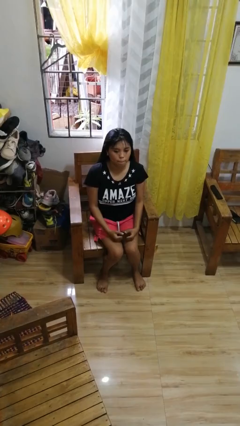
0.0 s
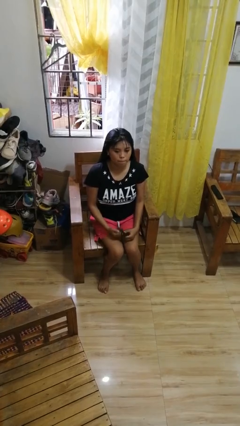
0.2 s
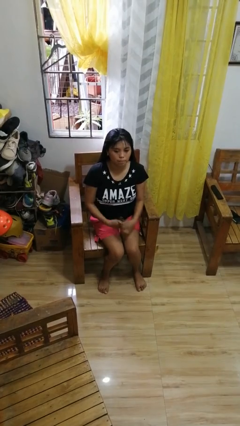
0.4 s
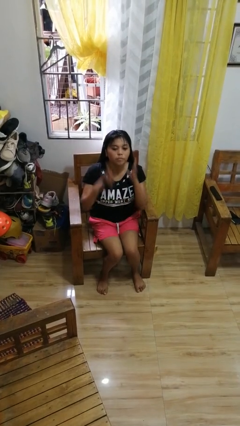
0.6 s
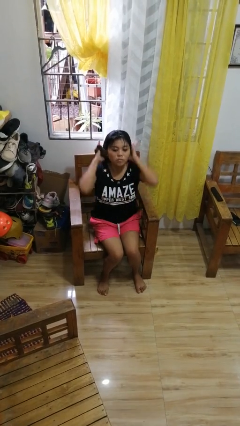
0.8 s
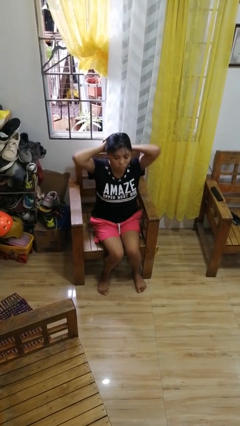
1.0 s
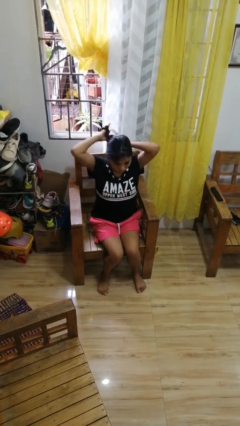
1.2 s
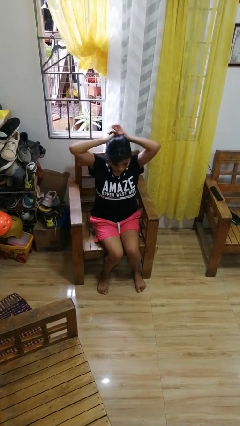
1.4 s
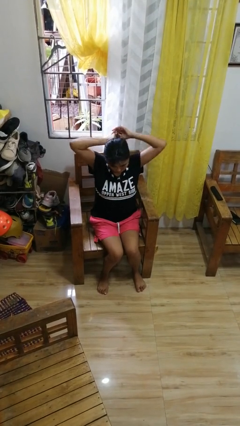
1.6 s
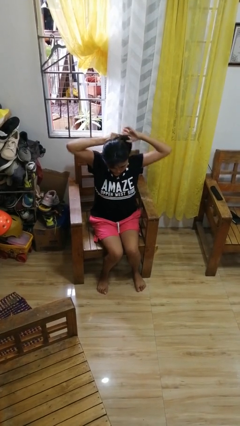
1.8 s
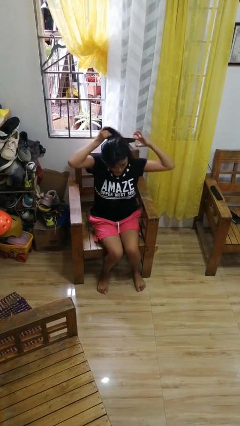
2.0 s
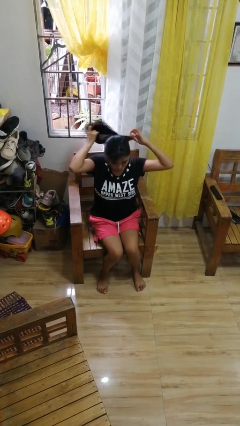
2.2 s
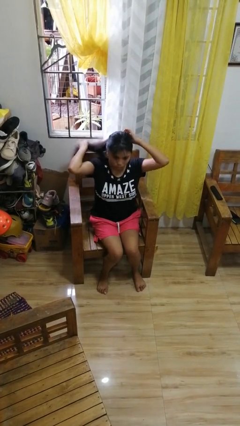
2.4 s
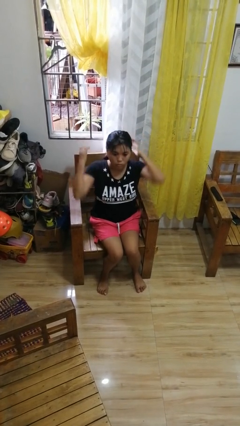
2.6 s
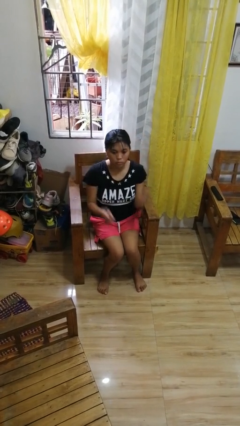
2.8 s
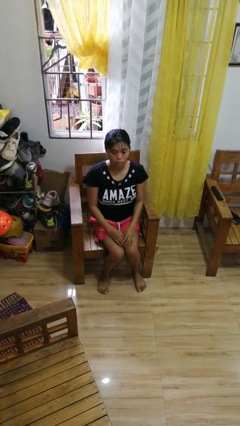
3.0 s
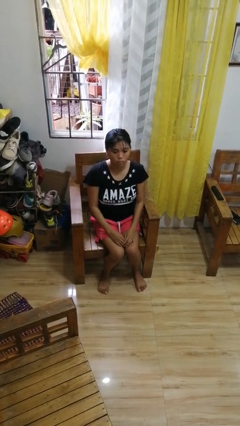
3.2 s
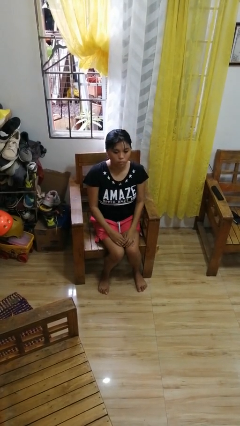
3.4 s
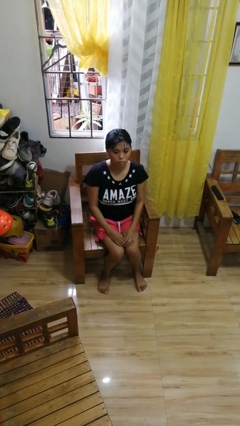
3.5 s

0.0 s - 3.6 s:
person puts hair in ponytail

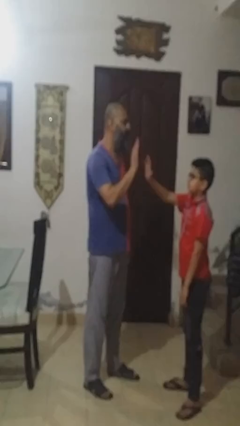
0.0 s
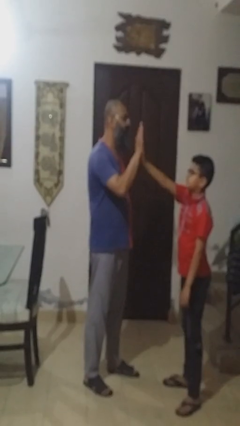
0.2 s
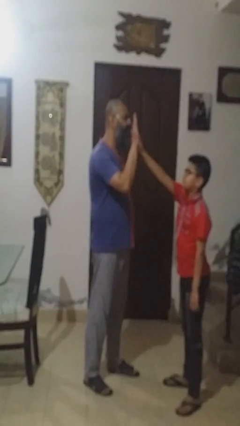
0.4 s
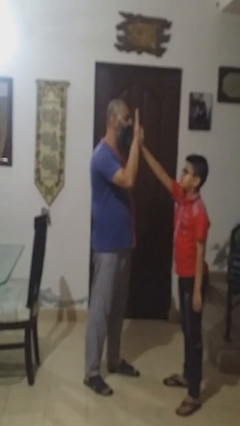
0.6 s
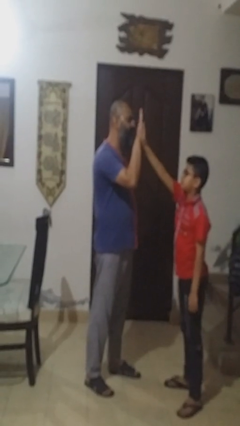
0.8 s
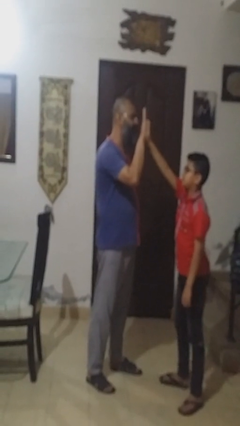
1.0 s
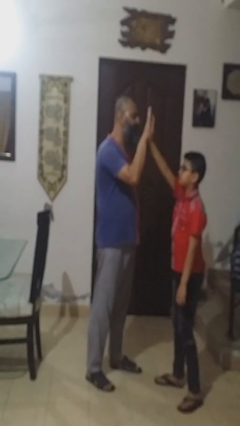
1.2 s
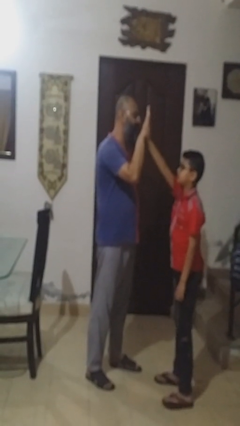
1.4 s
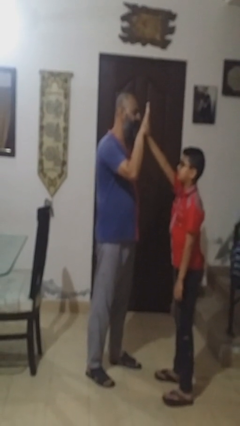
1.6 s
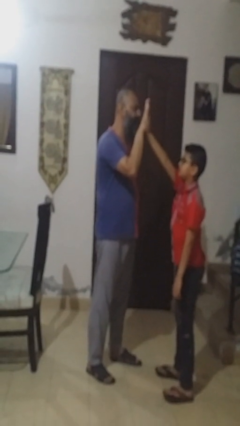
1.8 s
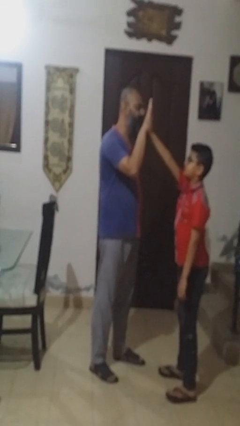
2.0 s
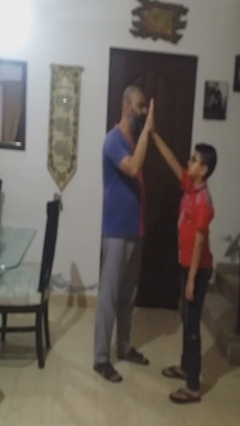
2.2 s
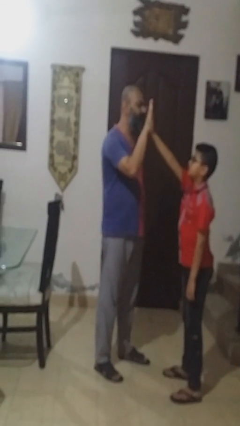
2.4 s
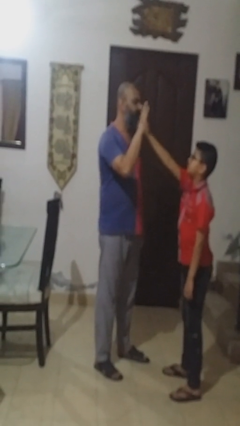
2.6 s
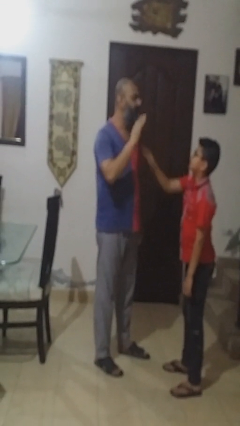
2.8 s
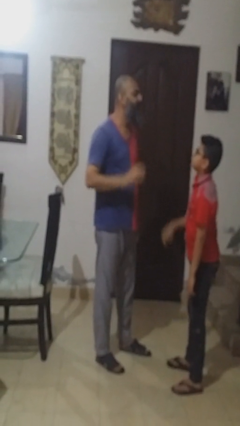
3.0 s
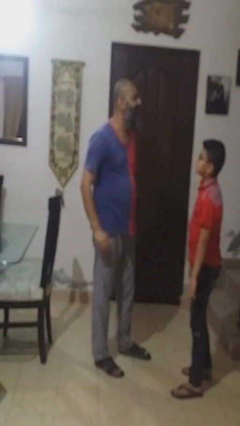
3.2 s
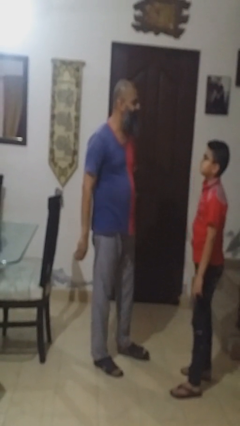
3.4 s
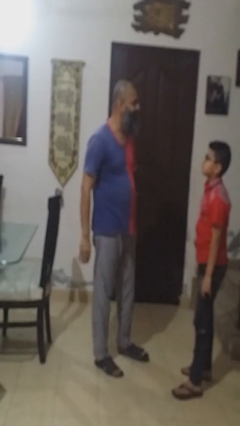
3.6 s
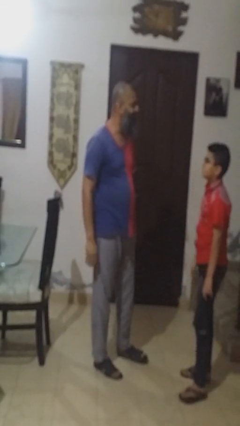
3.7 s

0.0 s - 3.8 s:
person highfives hand

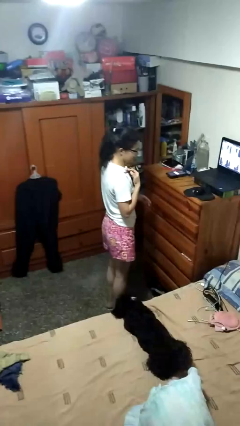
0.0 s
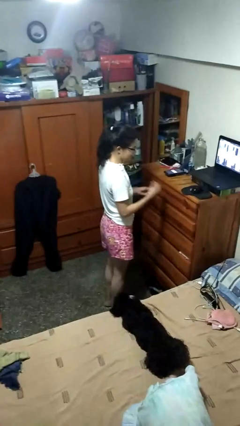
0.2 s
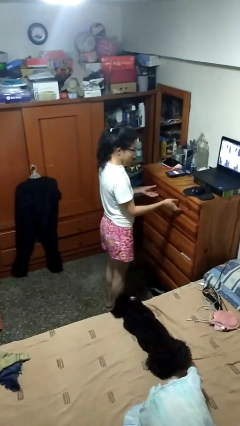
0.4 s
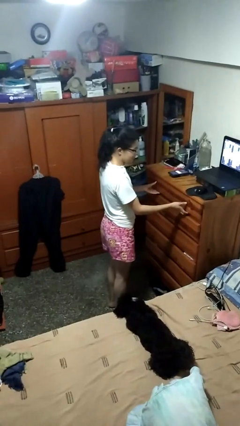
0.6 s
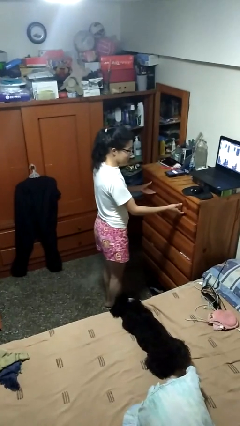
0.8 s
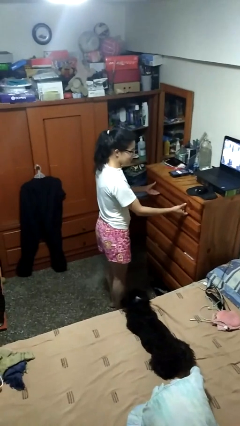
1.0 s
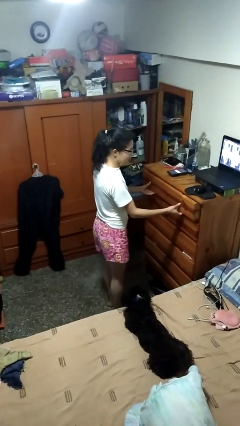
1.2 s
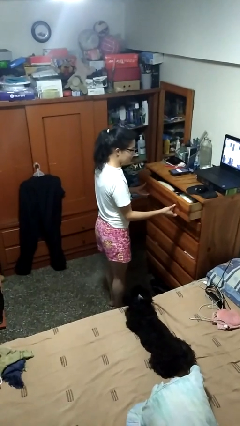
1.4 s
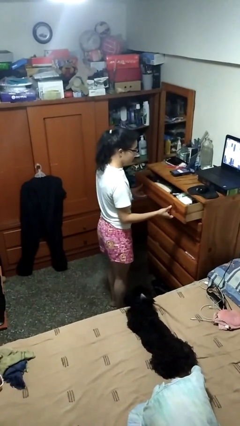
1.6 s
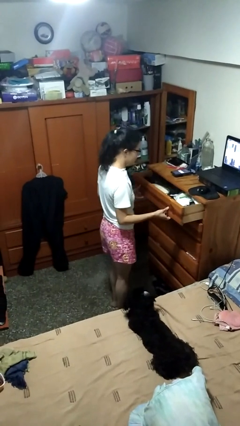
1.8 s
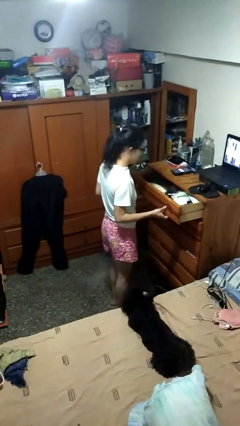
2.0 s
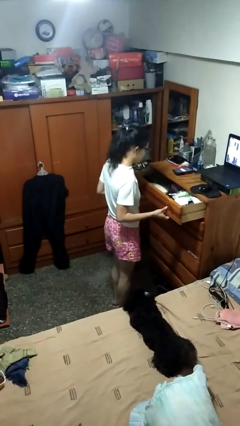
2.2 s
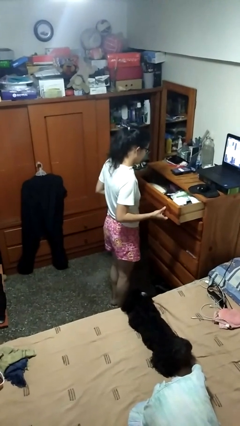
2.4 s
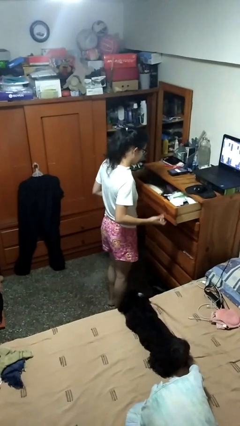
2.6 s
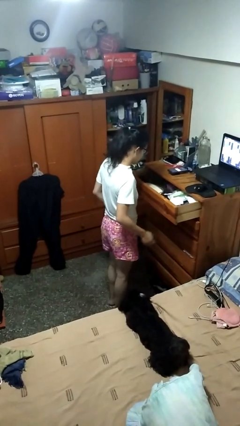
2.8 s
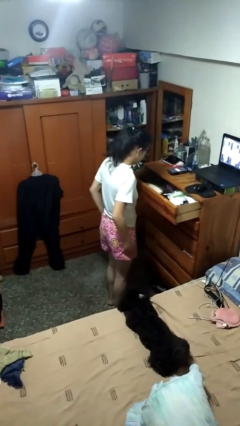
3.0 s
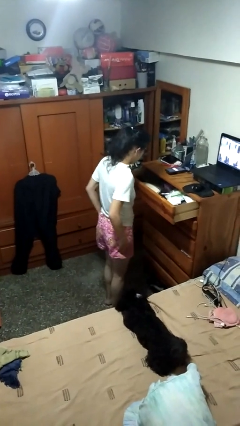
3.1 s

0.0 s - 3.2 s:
person opens dresser drawer

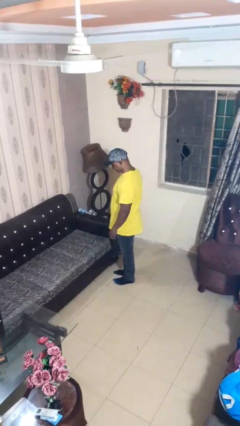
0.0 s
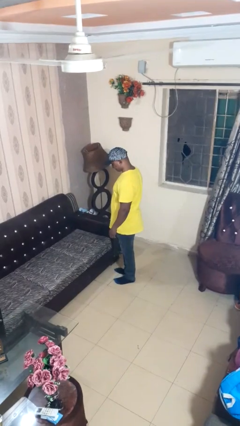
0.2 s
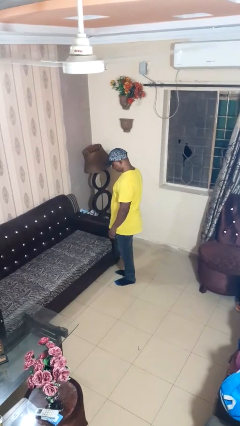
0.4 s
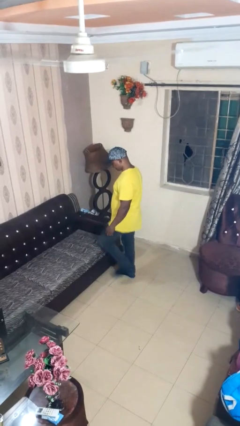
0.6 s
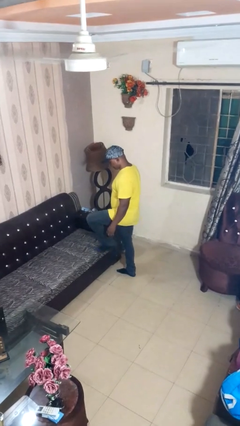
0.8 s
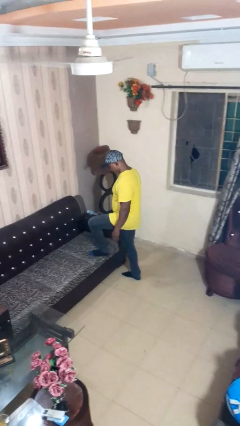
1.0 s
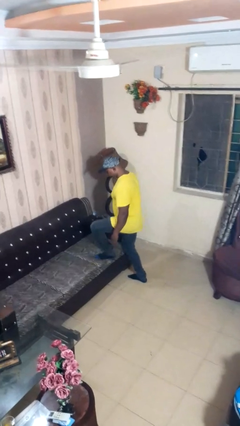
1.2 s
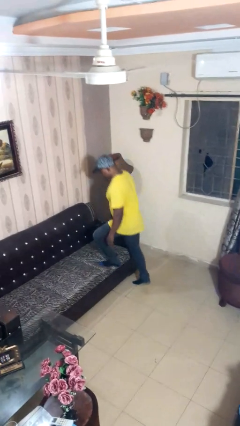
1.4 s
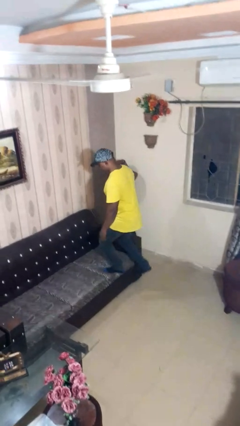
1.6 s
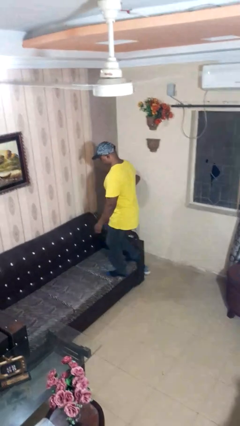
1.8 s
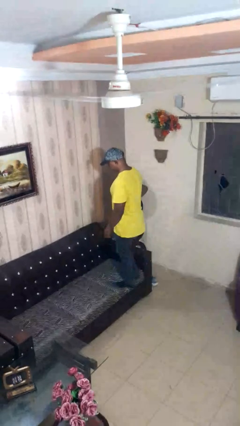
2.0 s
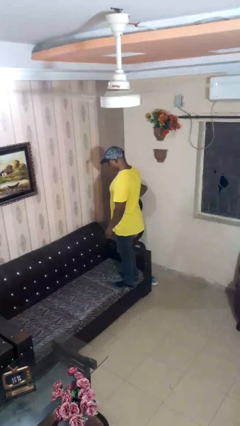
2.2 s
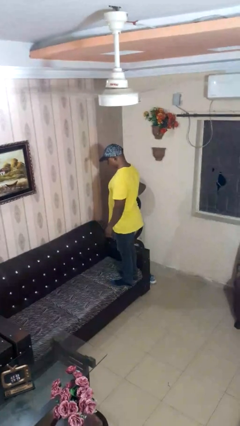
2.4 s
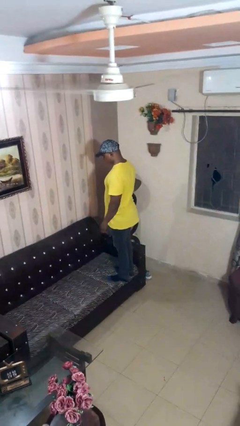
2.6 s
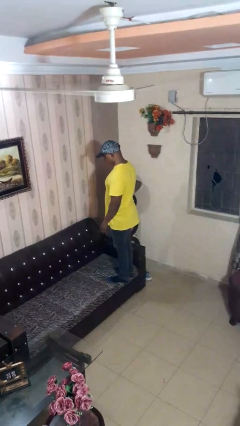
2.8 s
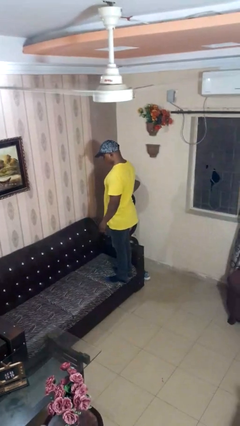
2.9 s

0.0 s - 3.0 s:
person climbs on couch

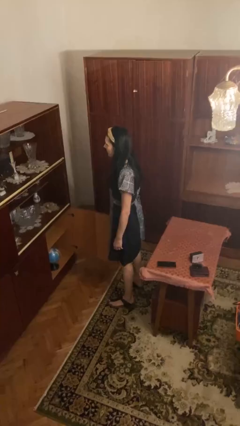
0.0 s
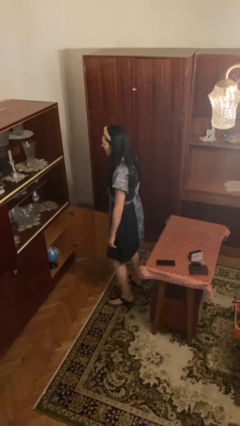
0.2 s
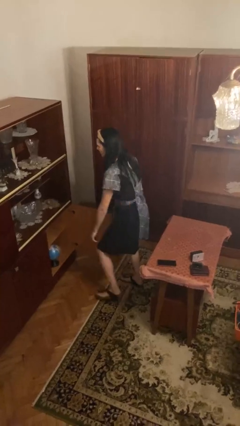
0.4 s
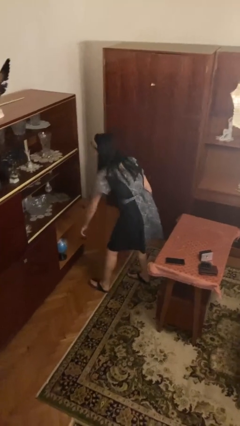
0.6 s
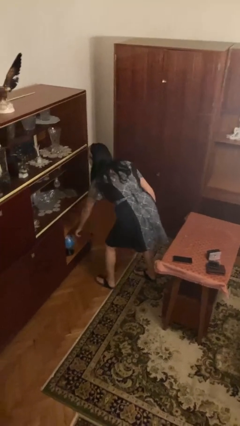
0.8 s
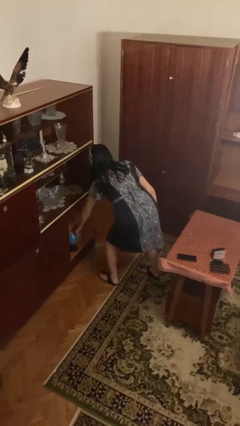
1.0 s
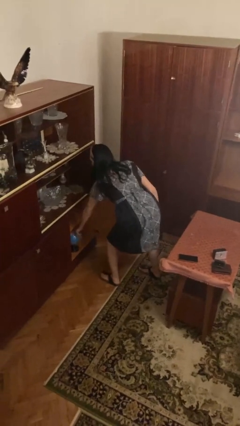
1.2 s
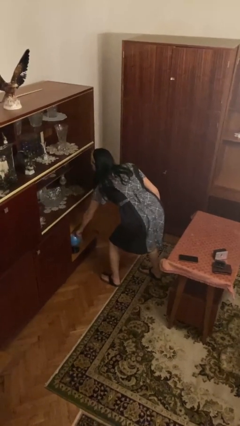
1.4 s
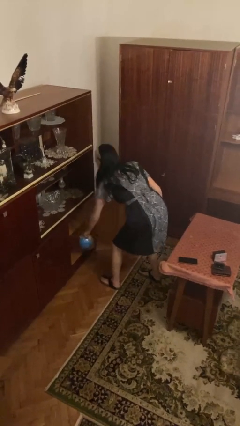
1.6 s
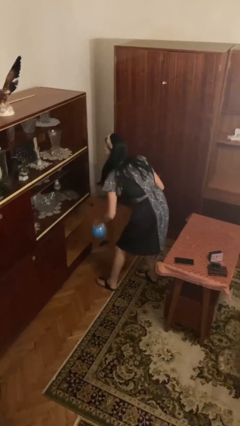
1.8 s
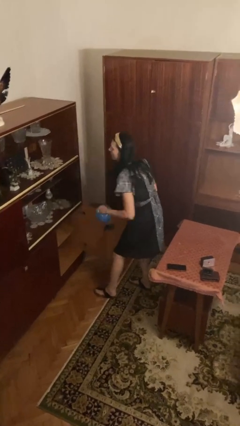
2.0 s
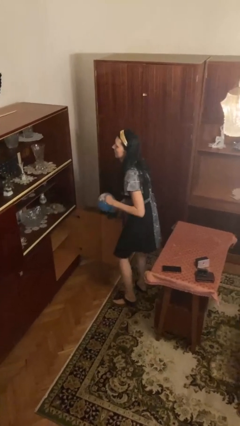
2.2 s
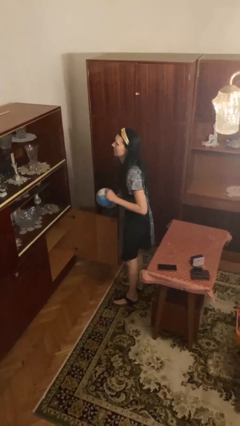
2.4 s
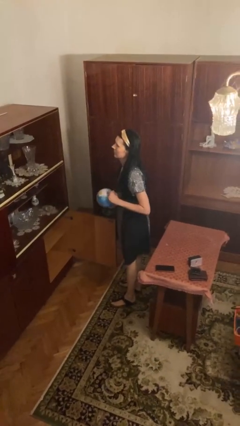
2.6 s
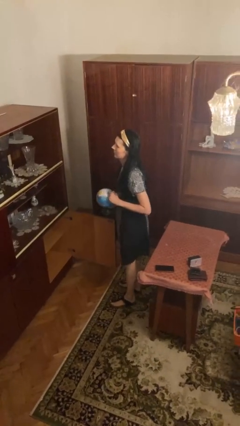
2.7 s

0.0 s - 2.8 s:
person picks up object from cabinet

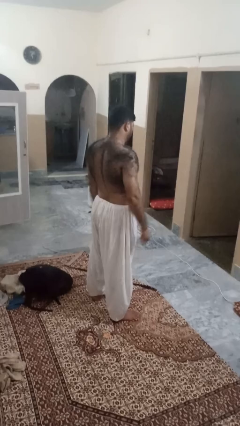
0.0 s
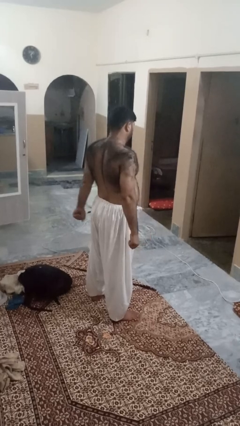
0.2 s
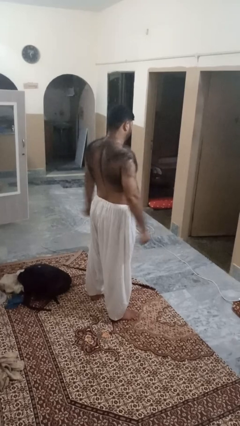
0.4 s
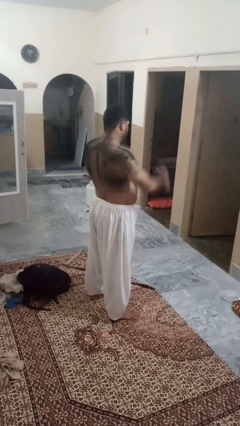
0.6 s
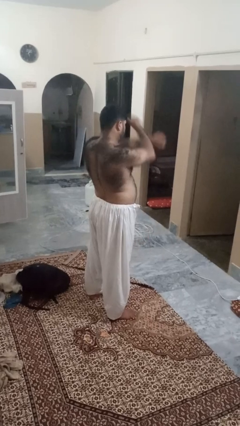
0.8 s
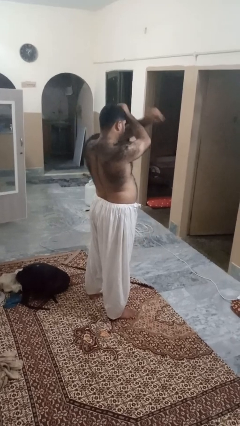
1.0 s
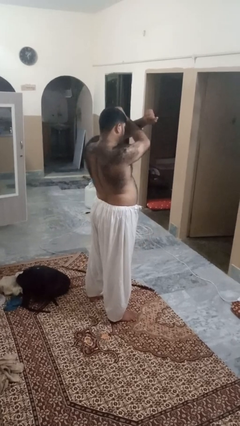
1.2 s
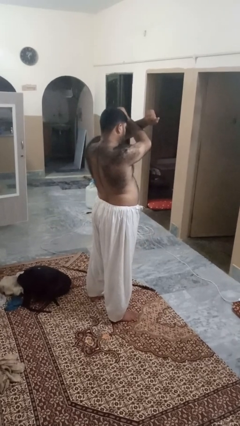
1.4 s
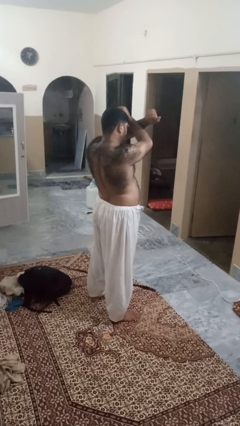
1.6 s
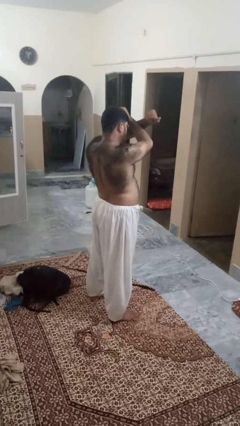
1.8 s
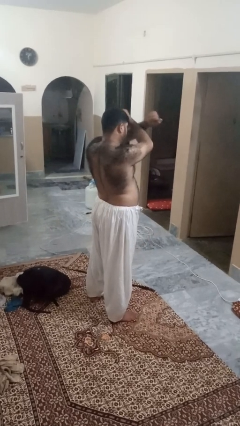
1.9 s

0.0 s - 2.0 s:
person gestures arms x
